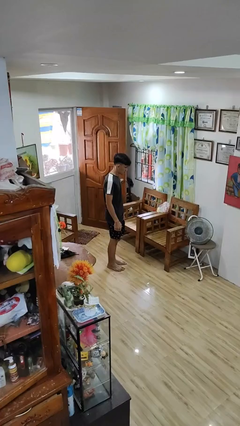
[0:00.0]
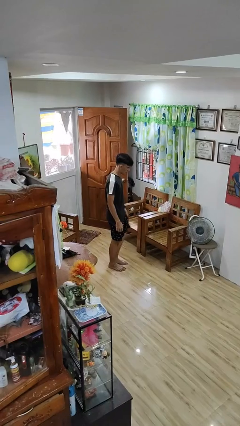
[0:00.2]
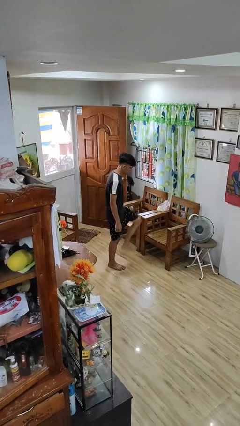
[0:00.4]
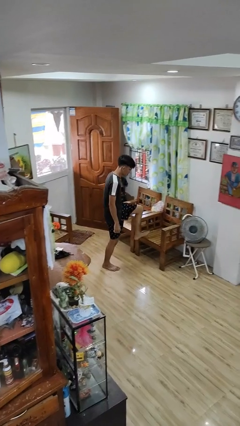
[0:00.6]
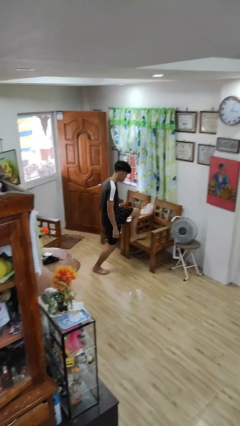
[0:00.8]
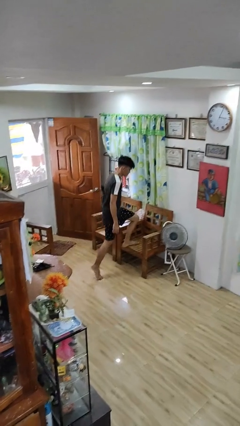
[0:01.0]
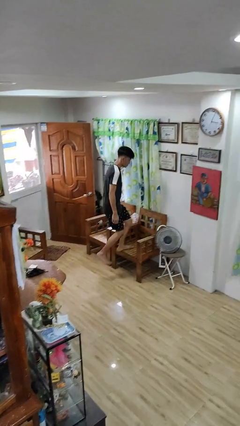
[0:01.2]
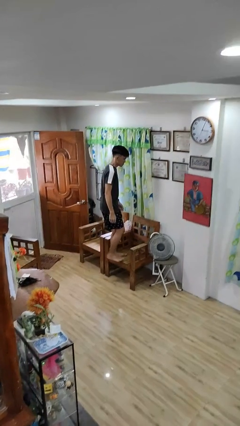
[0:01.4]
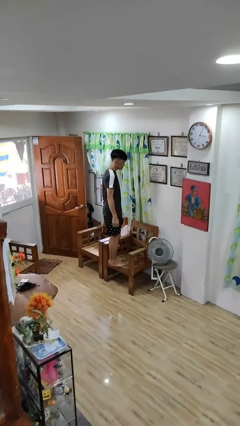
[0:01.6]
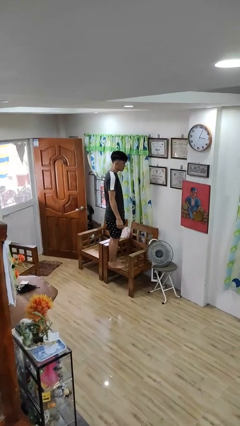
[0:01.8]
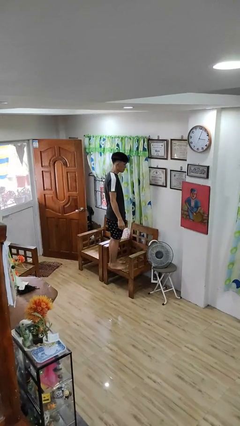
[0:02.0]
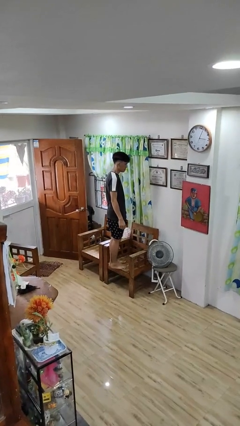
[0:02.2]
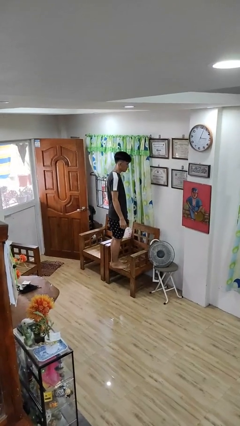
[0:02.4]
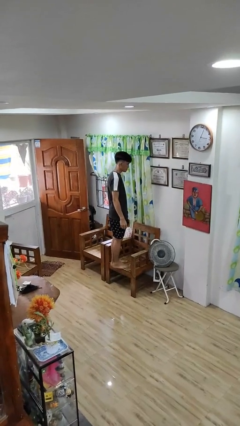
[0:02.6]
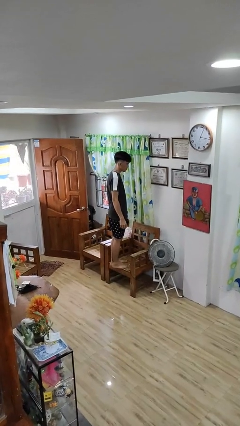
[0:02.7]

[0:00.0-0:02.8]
person climbs on chair

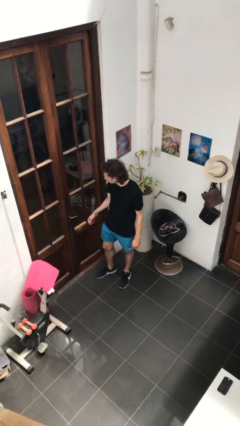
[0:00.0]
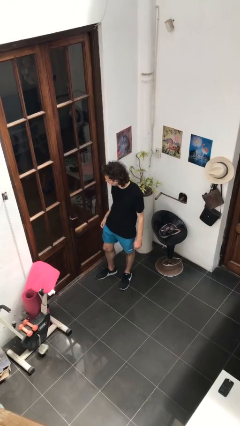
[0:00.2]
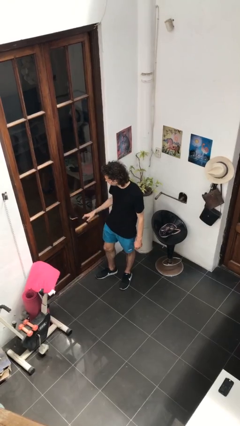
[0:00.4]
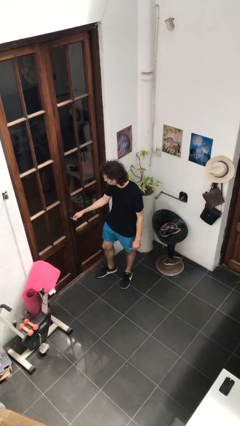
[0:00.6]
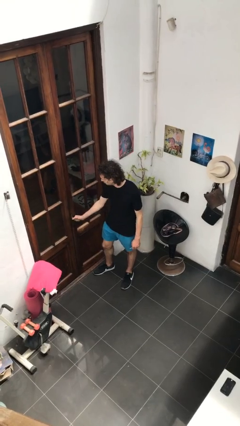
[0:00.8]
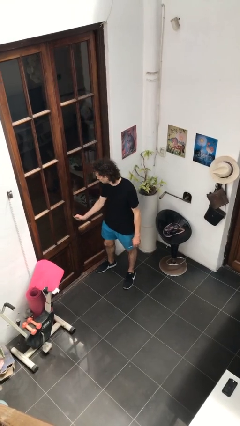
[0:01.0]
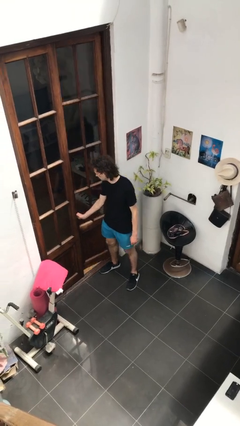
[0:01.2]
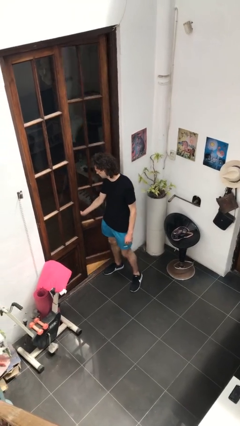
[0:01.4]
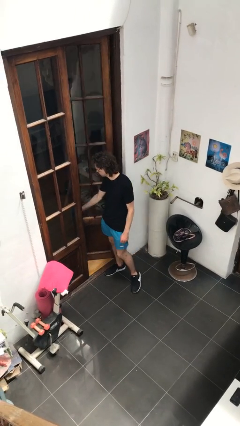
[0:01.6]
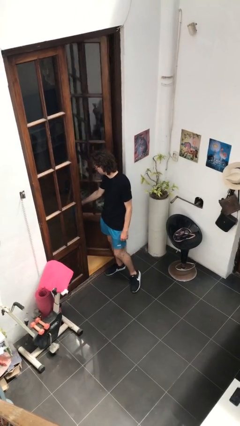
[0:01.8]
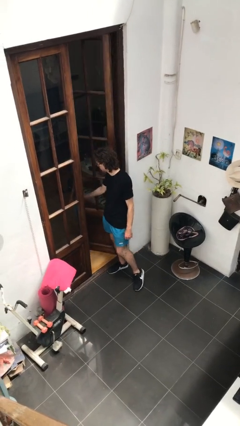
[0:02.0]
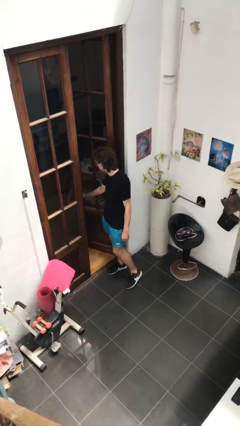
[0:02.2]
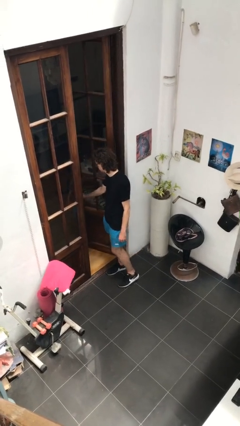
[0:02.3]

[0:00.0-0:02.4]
person opens facility door

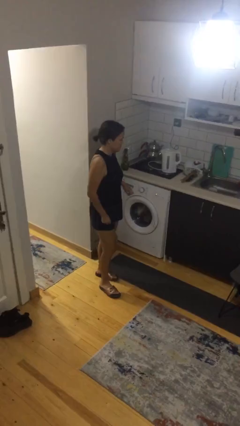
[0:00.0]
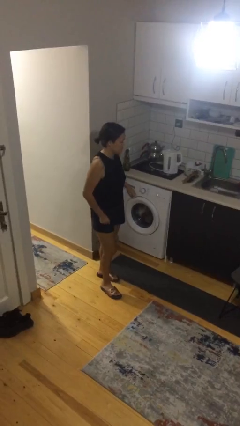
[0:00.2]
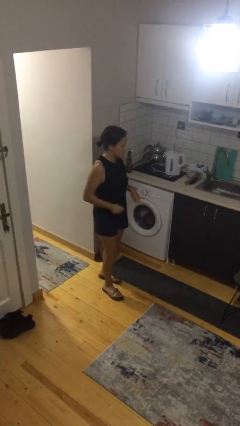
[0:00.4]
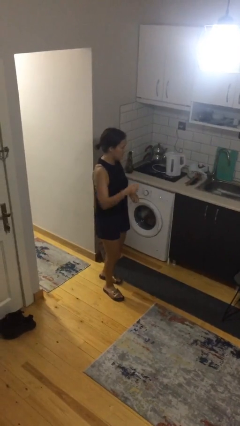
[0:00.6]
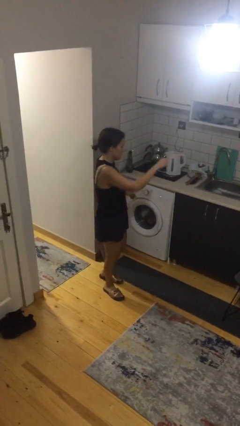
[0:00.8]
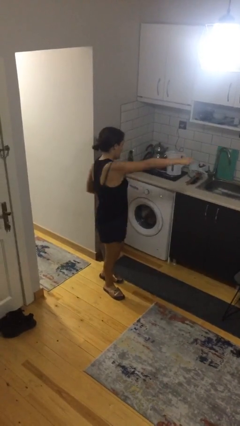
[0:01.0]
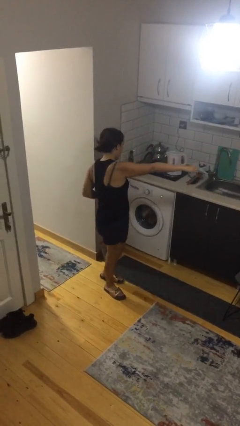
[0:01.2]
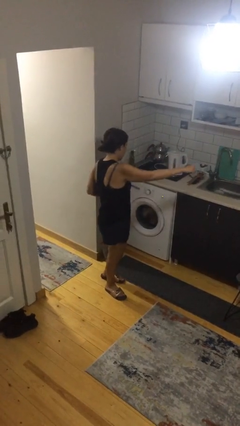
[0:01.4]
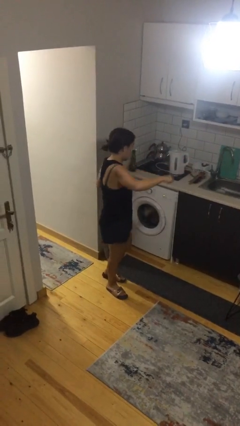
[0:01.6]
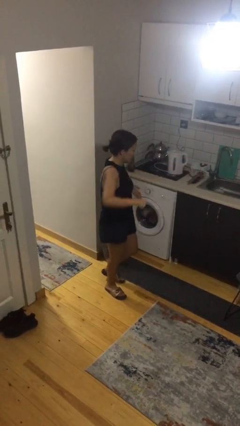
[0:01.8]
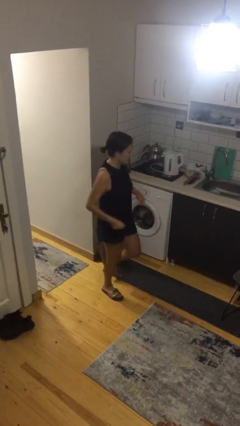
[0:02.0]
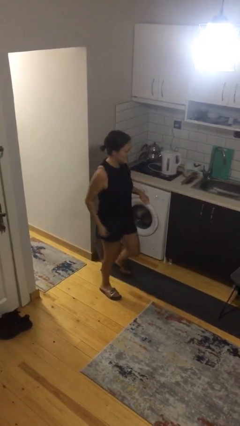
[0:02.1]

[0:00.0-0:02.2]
person punches

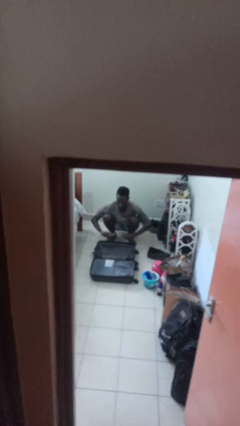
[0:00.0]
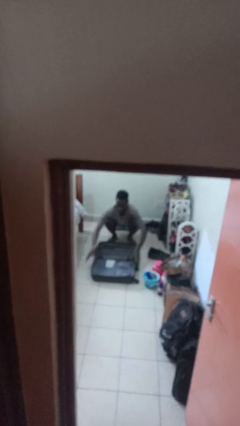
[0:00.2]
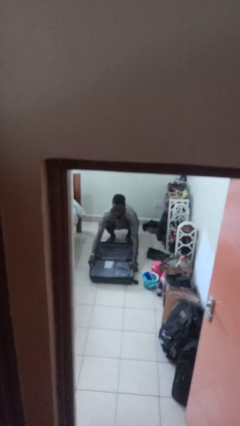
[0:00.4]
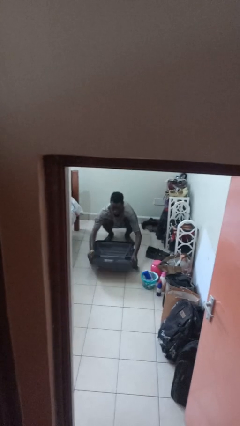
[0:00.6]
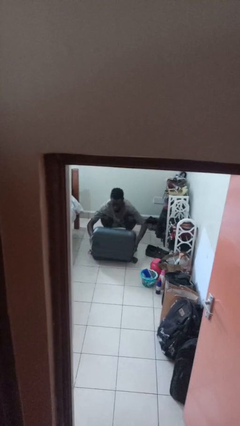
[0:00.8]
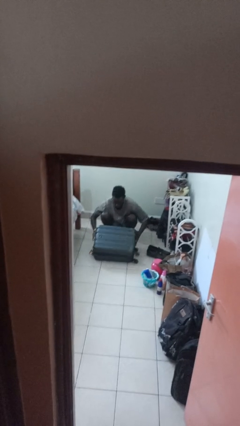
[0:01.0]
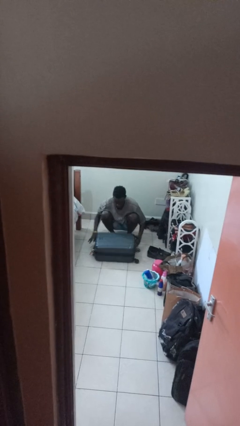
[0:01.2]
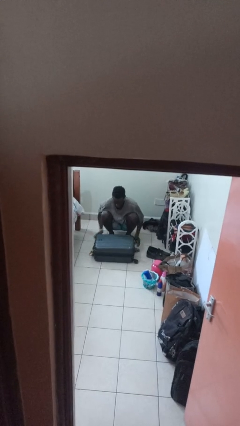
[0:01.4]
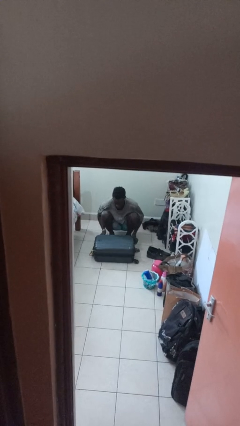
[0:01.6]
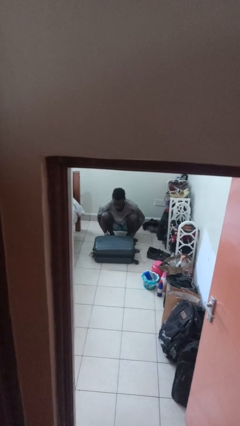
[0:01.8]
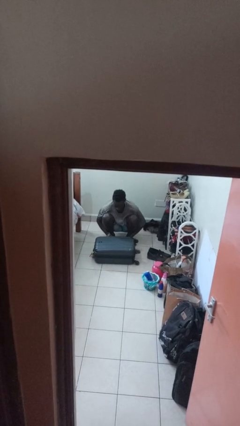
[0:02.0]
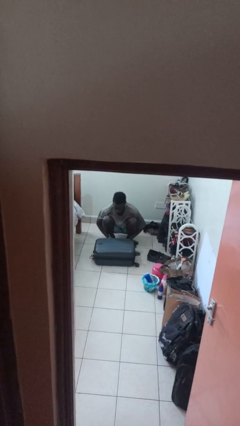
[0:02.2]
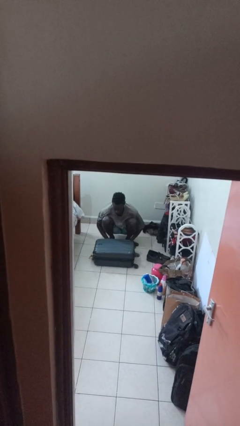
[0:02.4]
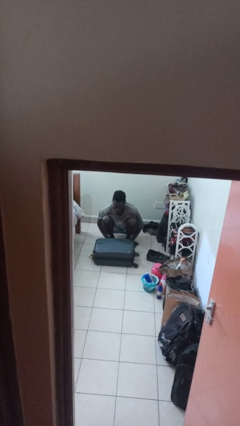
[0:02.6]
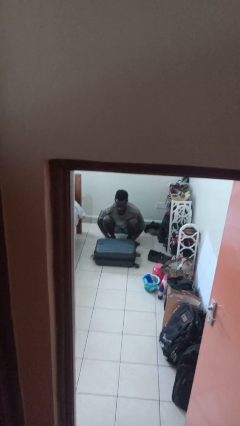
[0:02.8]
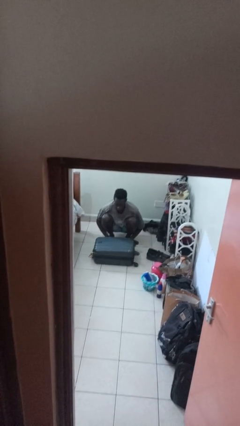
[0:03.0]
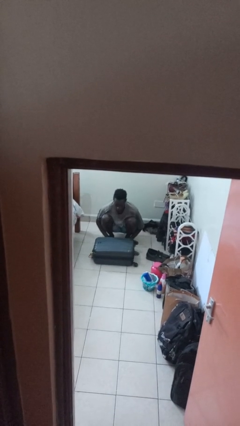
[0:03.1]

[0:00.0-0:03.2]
person closes suitcase

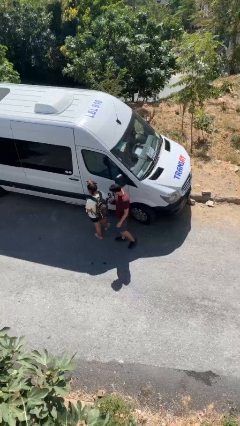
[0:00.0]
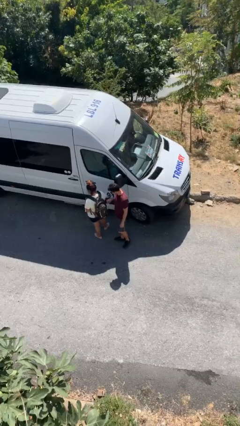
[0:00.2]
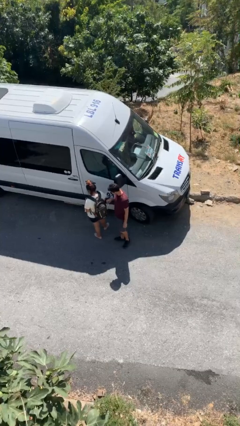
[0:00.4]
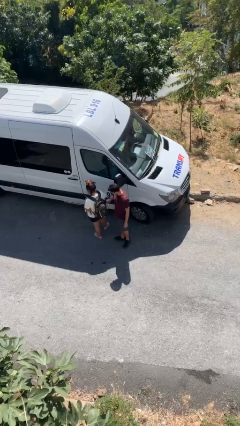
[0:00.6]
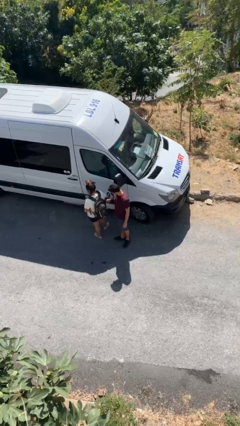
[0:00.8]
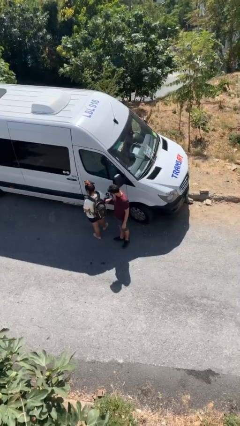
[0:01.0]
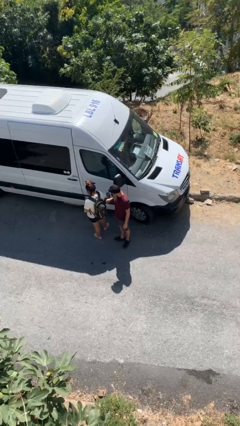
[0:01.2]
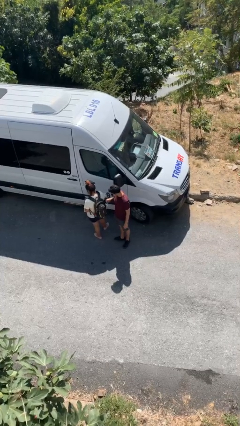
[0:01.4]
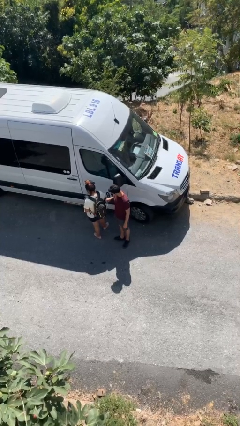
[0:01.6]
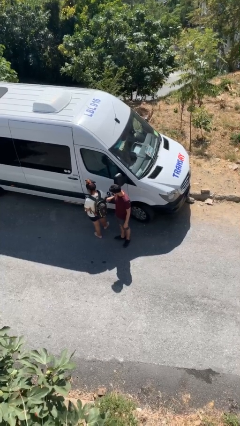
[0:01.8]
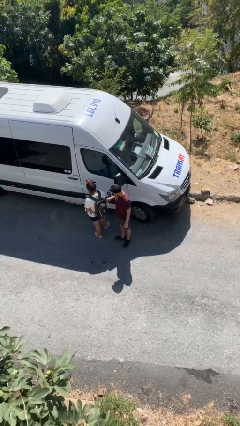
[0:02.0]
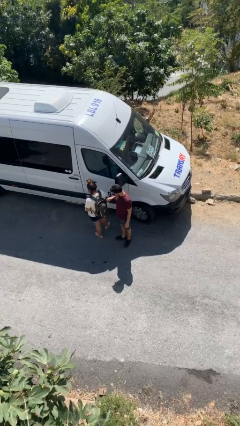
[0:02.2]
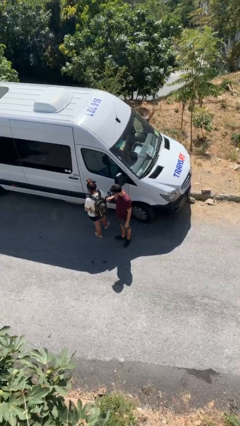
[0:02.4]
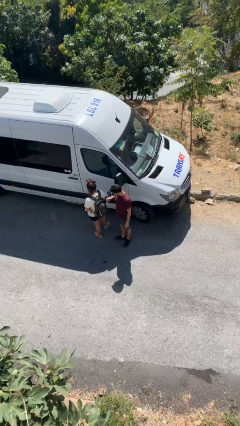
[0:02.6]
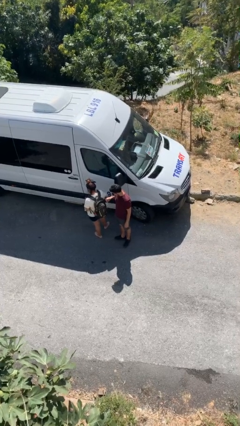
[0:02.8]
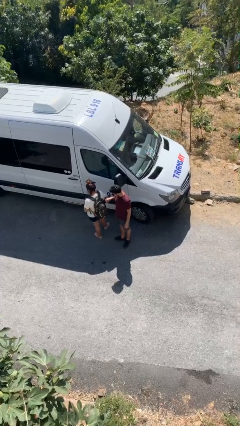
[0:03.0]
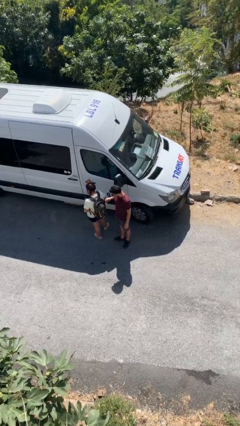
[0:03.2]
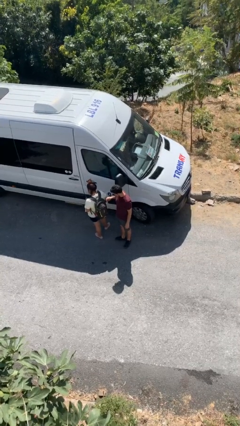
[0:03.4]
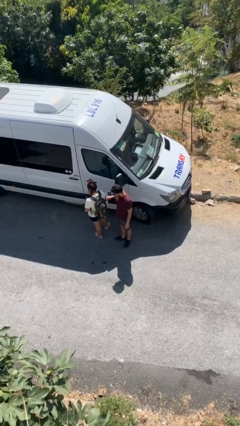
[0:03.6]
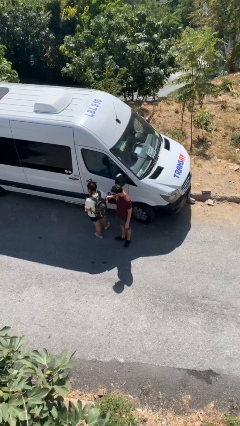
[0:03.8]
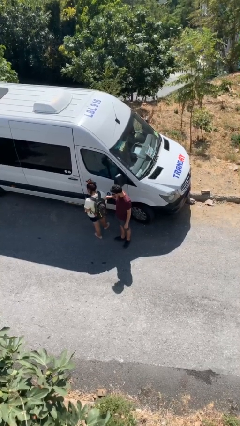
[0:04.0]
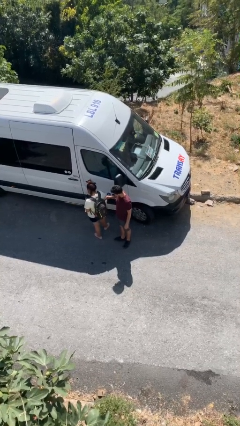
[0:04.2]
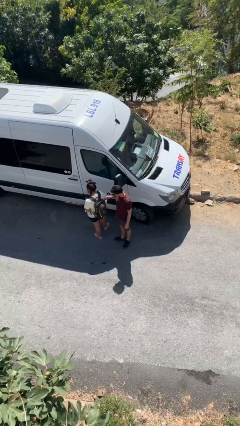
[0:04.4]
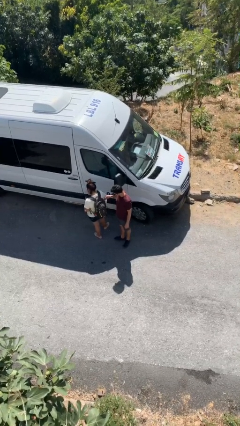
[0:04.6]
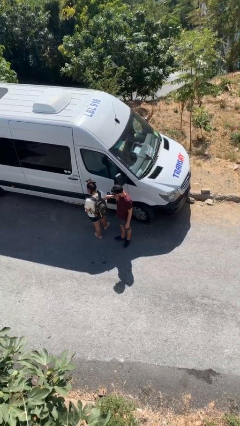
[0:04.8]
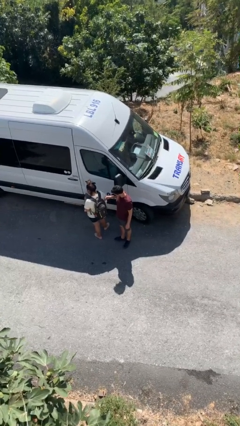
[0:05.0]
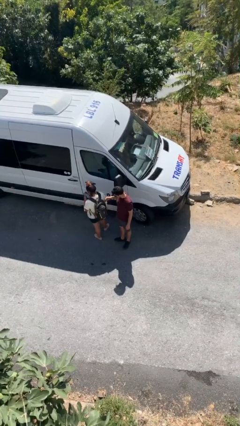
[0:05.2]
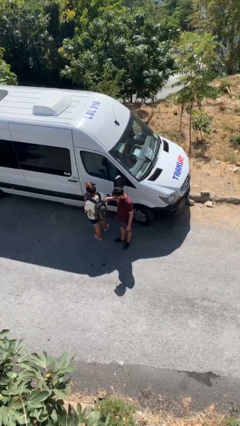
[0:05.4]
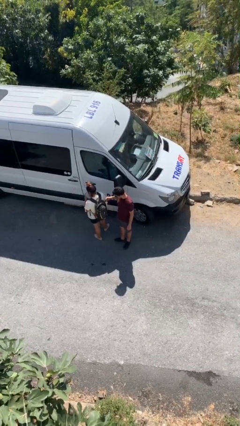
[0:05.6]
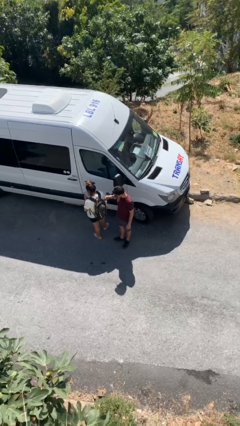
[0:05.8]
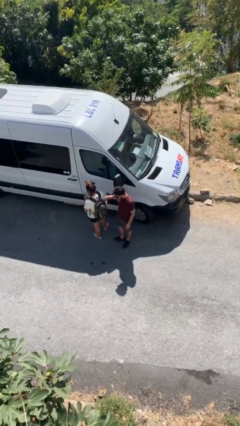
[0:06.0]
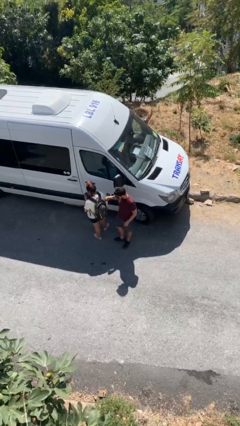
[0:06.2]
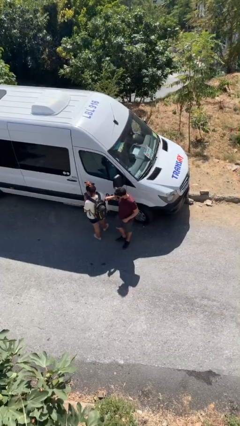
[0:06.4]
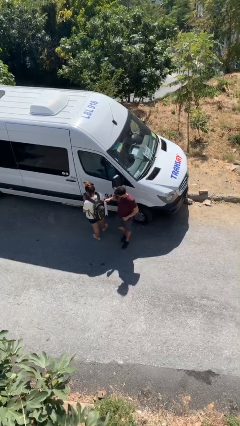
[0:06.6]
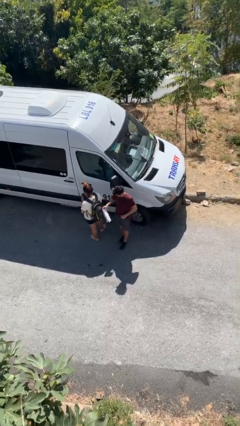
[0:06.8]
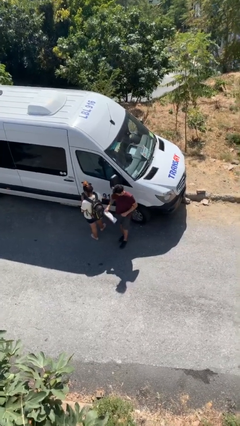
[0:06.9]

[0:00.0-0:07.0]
person steals object from person
